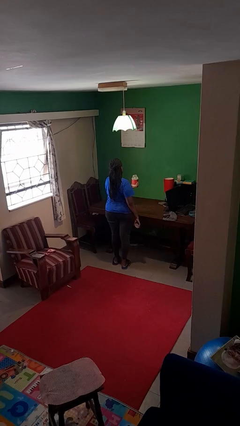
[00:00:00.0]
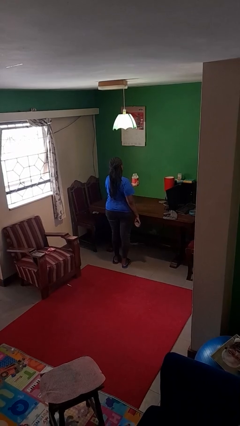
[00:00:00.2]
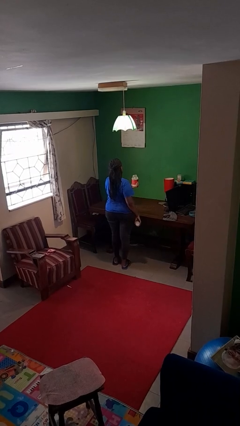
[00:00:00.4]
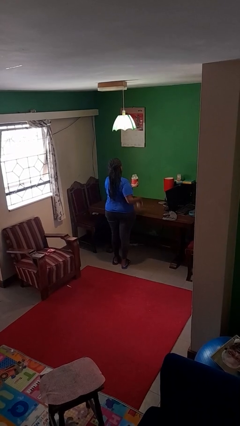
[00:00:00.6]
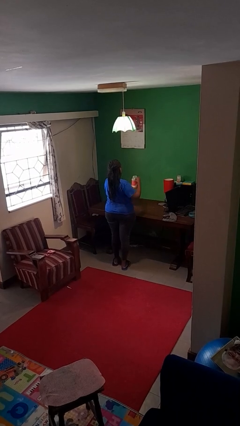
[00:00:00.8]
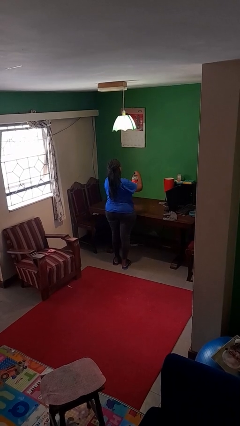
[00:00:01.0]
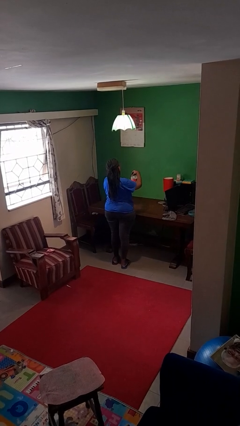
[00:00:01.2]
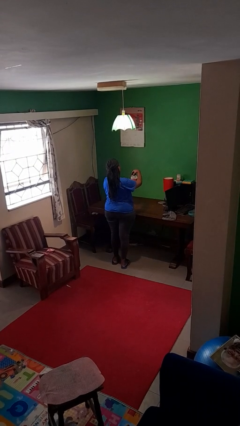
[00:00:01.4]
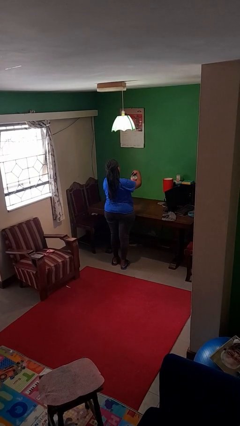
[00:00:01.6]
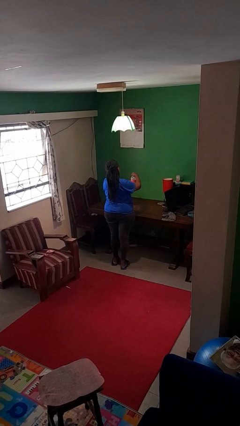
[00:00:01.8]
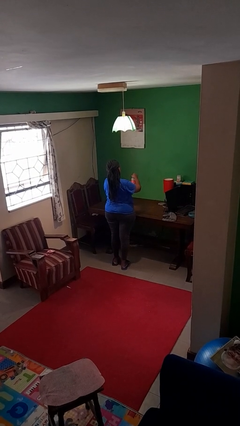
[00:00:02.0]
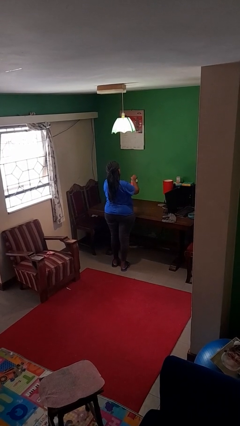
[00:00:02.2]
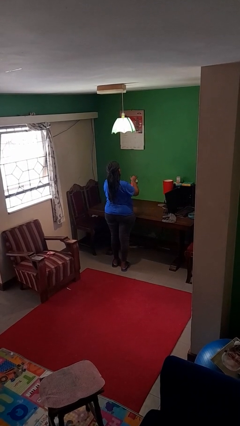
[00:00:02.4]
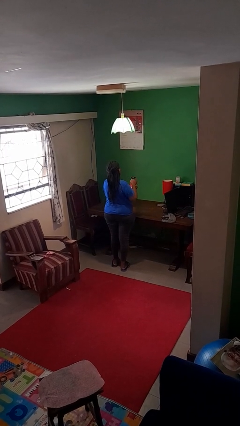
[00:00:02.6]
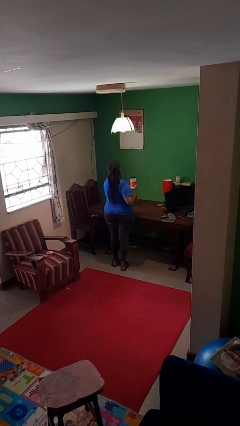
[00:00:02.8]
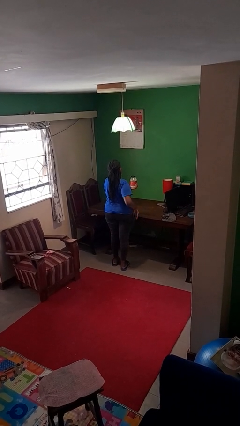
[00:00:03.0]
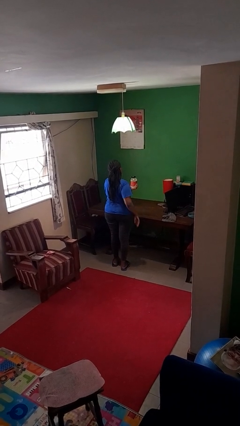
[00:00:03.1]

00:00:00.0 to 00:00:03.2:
person closes jar

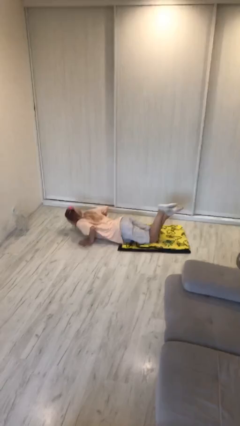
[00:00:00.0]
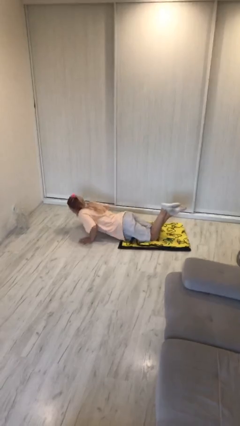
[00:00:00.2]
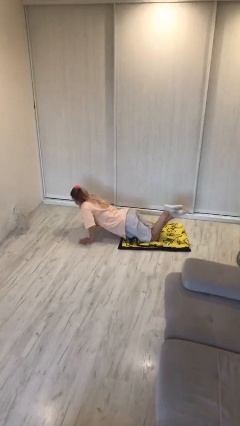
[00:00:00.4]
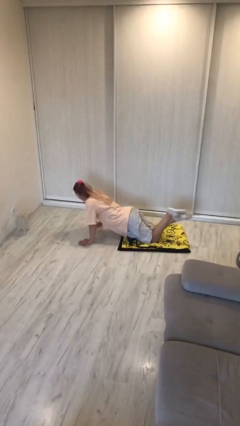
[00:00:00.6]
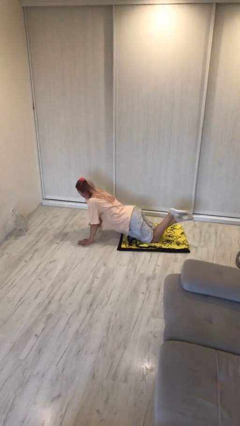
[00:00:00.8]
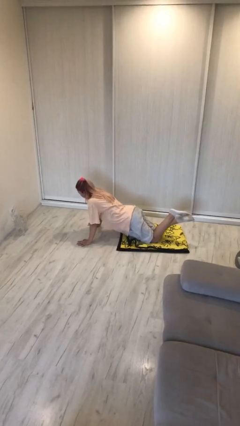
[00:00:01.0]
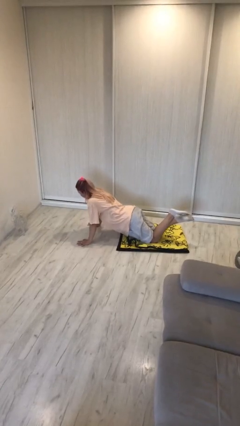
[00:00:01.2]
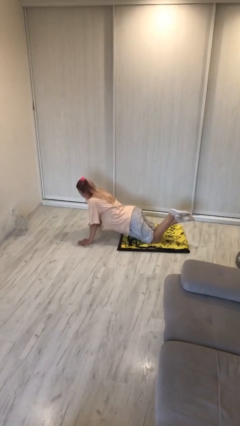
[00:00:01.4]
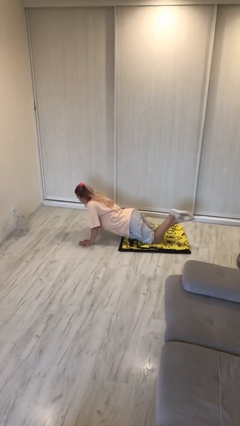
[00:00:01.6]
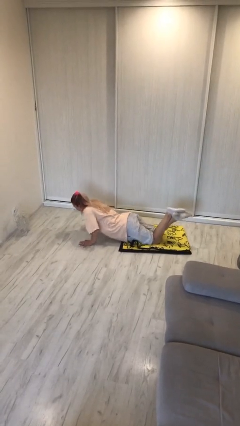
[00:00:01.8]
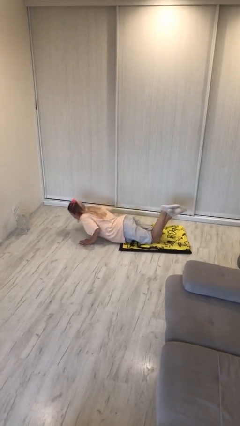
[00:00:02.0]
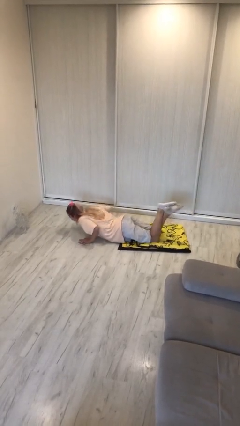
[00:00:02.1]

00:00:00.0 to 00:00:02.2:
person exercises with pushup

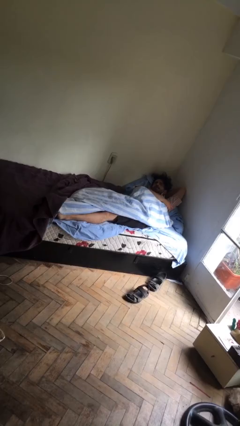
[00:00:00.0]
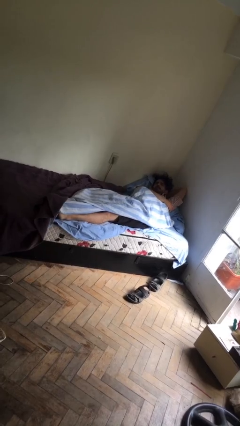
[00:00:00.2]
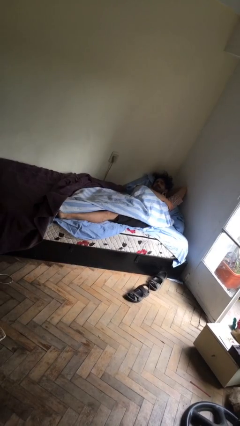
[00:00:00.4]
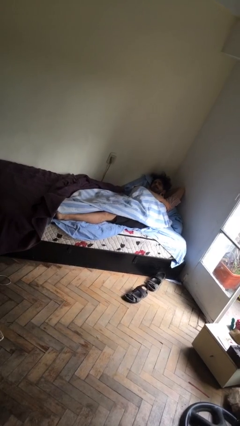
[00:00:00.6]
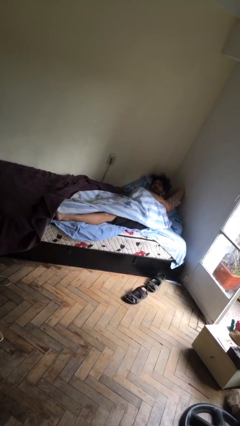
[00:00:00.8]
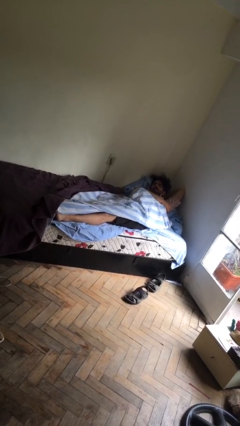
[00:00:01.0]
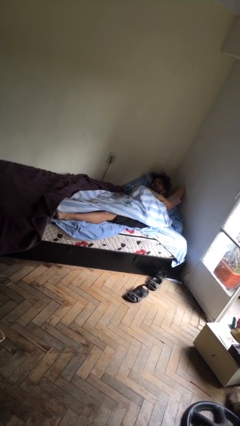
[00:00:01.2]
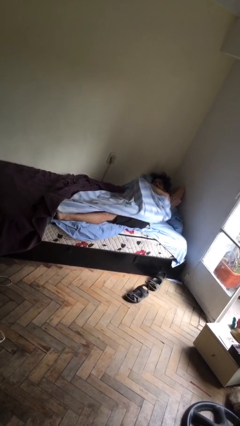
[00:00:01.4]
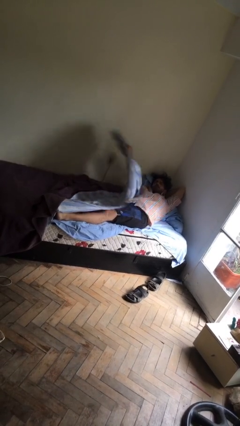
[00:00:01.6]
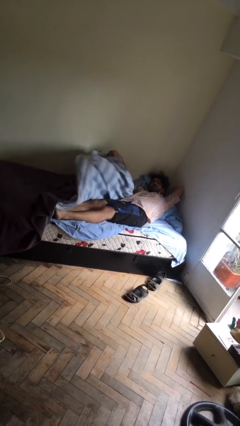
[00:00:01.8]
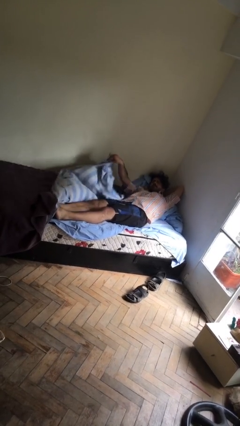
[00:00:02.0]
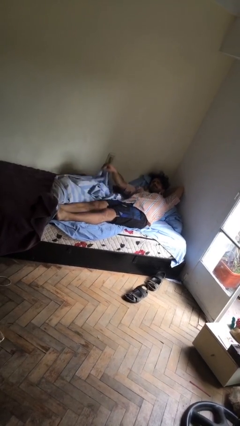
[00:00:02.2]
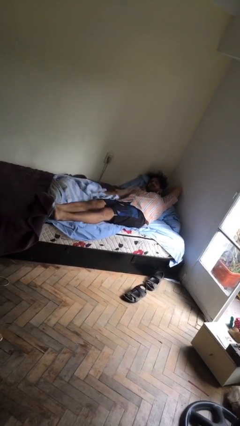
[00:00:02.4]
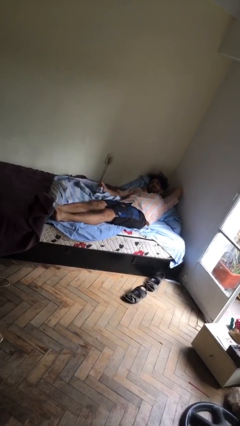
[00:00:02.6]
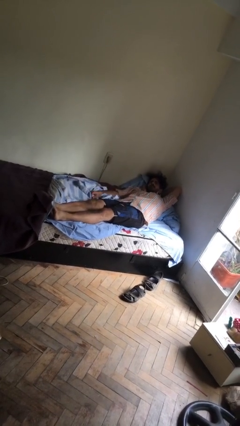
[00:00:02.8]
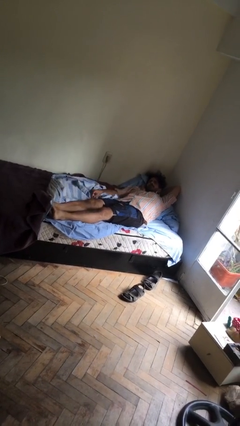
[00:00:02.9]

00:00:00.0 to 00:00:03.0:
person uncovers with bedsheets

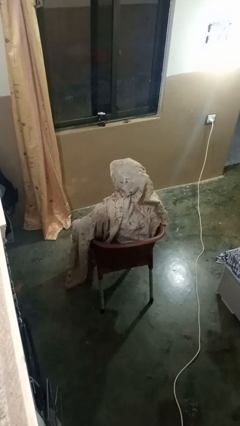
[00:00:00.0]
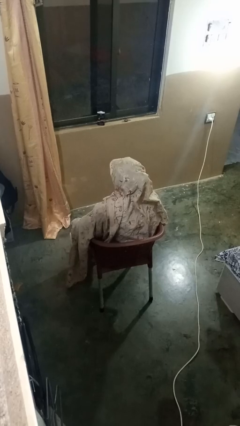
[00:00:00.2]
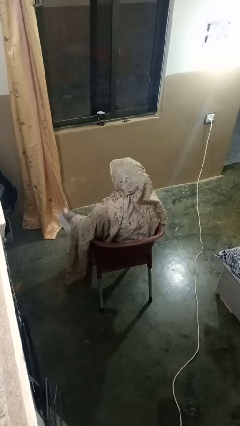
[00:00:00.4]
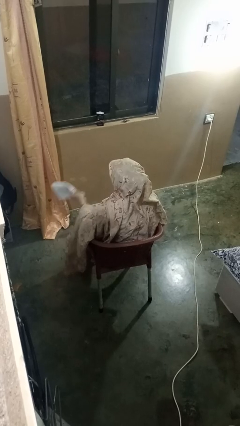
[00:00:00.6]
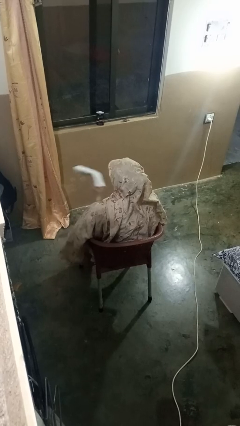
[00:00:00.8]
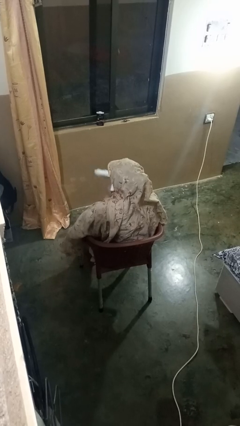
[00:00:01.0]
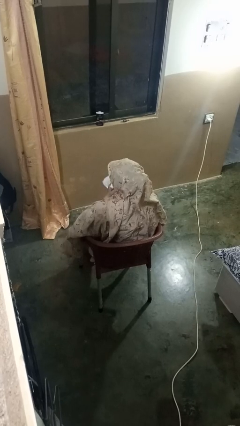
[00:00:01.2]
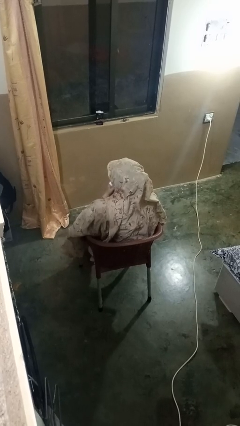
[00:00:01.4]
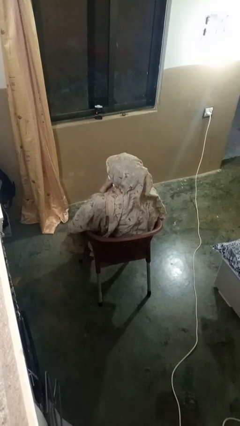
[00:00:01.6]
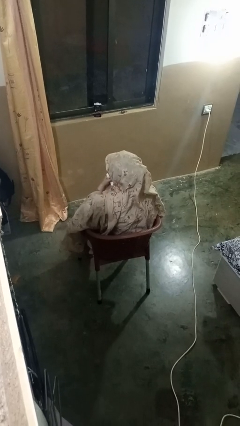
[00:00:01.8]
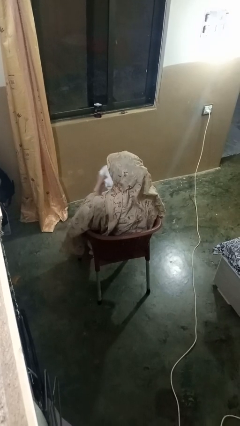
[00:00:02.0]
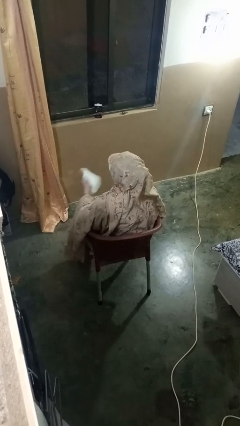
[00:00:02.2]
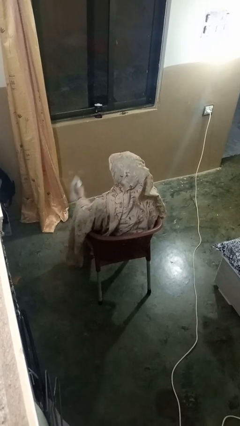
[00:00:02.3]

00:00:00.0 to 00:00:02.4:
person wipes mouth with napkin

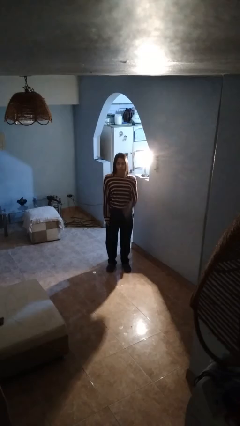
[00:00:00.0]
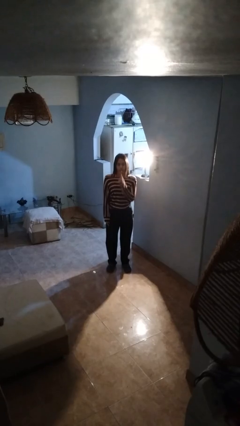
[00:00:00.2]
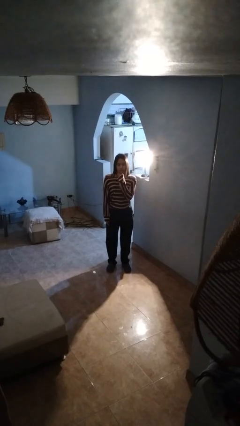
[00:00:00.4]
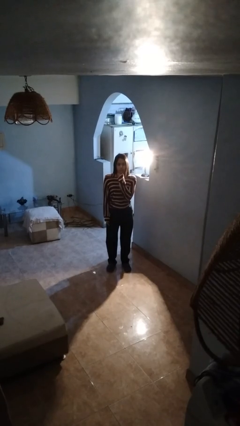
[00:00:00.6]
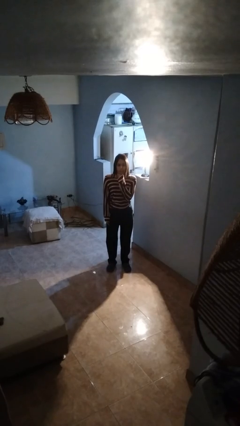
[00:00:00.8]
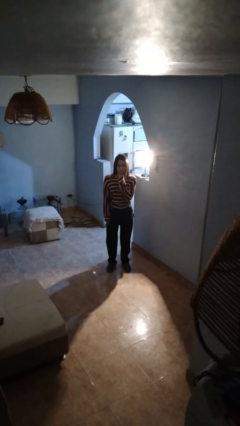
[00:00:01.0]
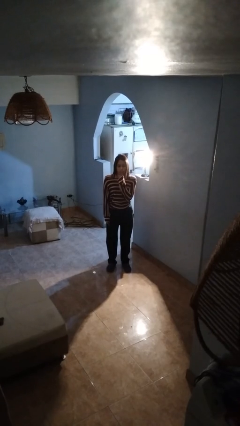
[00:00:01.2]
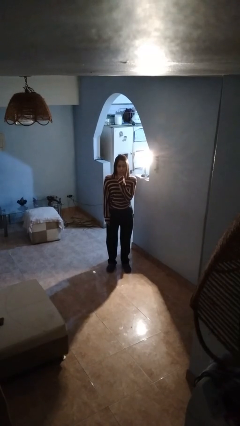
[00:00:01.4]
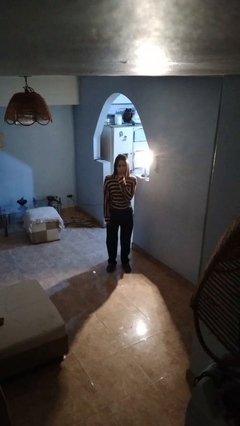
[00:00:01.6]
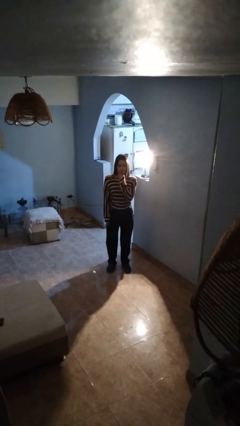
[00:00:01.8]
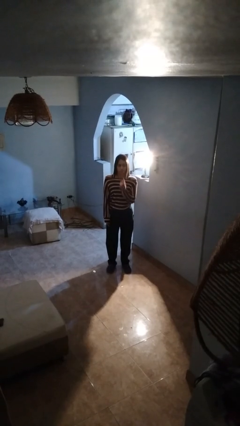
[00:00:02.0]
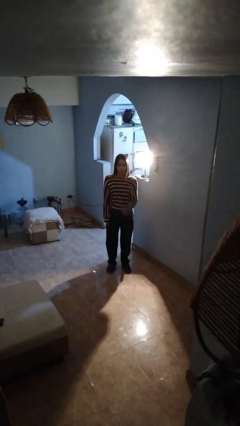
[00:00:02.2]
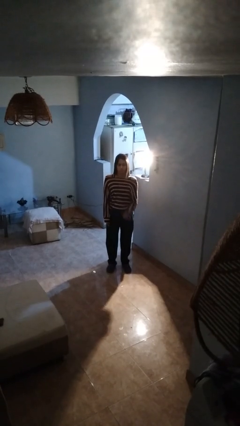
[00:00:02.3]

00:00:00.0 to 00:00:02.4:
person gestures be quiet

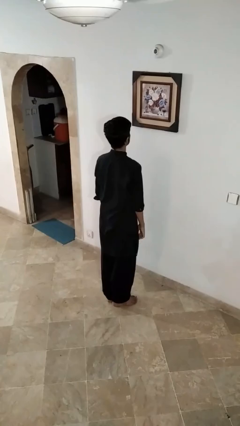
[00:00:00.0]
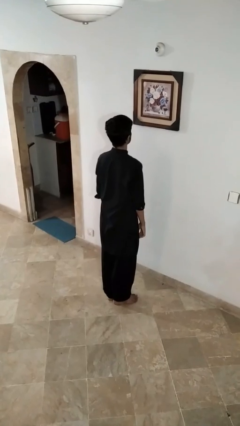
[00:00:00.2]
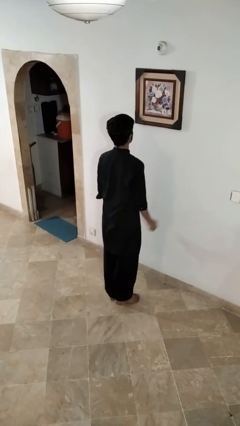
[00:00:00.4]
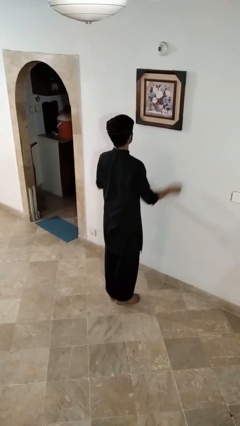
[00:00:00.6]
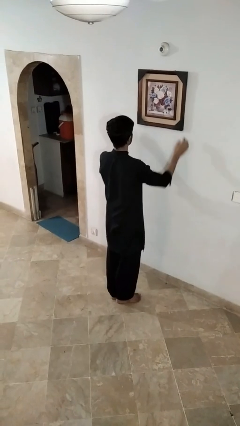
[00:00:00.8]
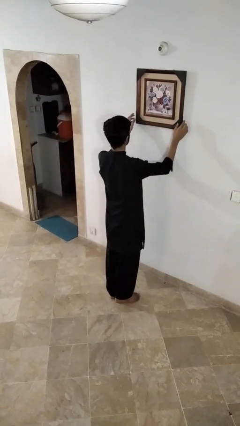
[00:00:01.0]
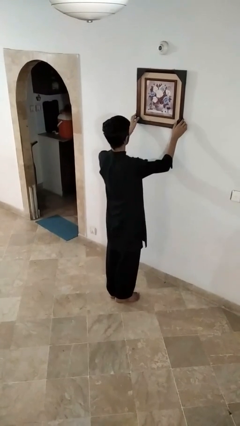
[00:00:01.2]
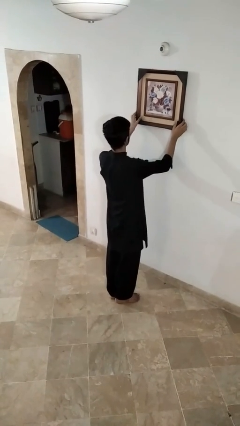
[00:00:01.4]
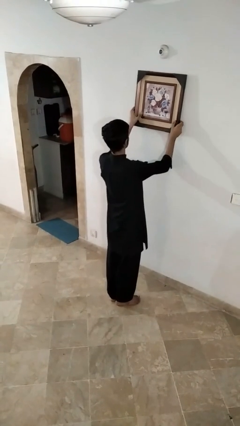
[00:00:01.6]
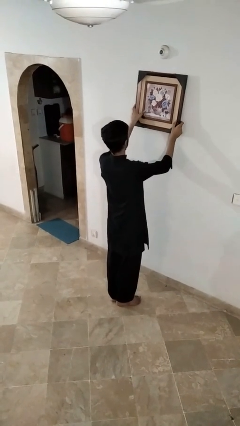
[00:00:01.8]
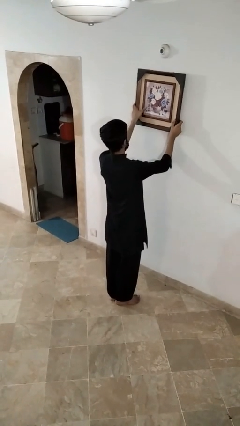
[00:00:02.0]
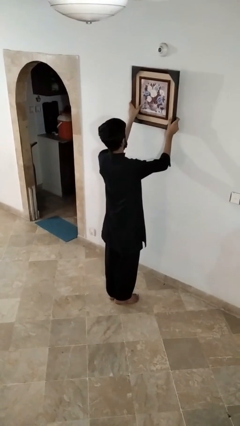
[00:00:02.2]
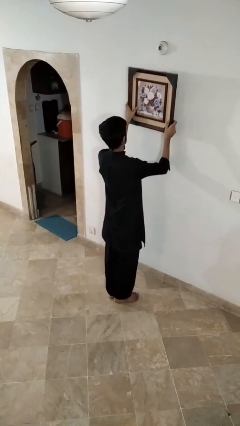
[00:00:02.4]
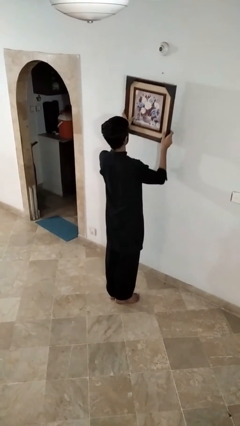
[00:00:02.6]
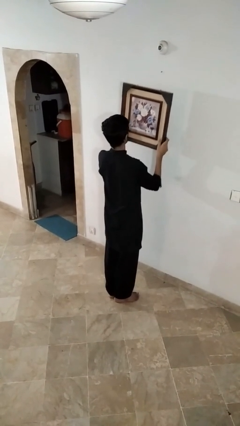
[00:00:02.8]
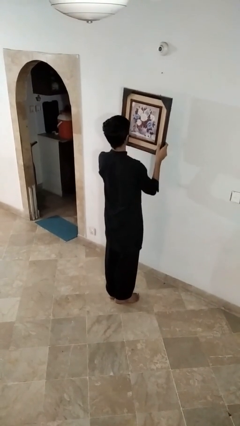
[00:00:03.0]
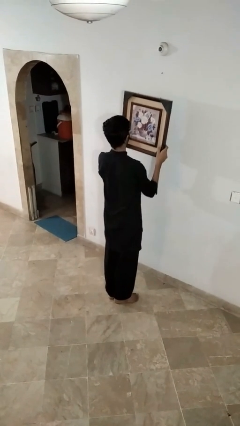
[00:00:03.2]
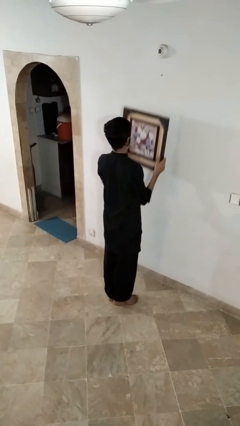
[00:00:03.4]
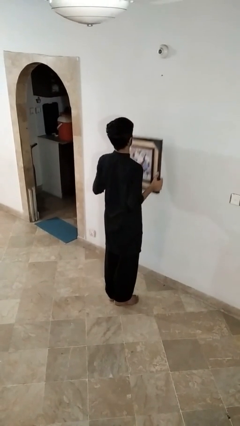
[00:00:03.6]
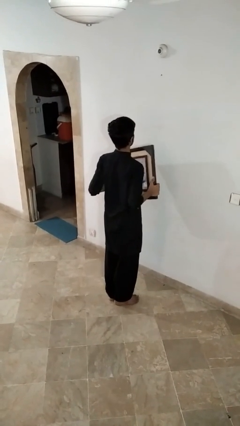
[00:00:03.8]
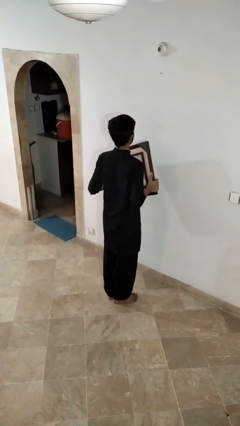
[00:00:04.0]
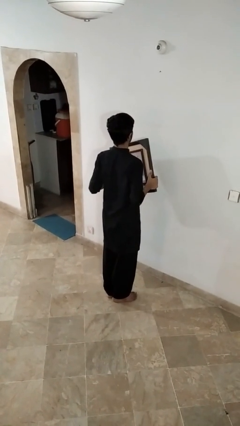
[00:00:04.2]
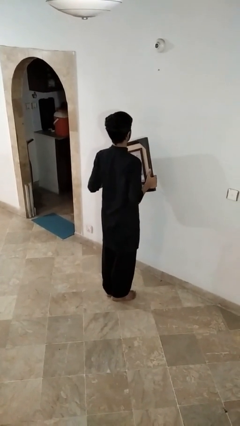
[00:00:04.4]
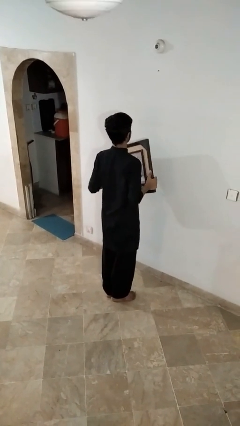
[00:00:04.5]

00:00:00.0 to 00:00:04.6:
person takes down picture frame
